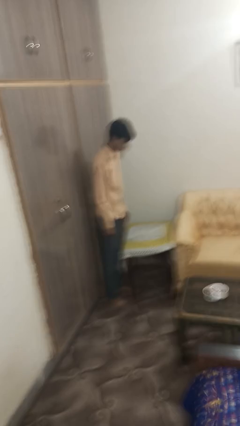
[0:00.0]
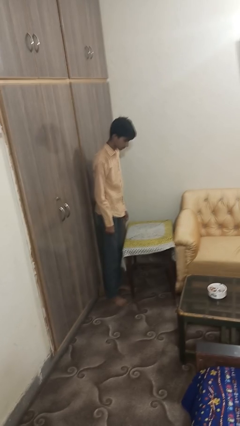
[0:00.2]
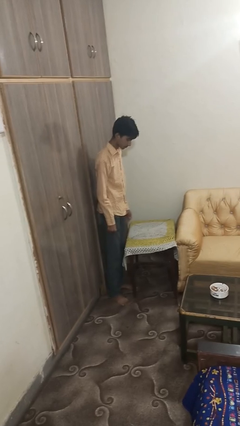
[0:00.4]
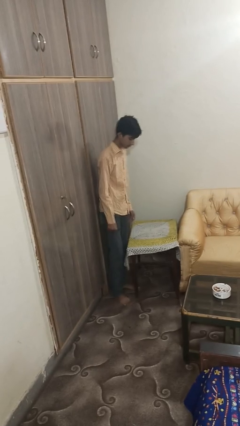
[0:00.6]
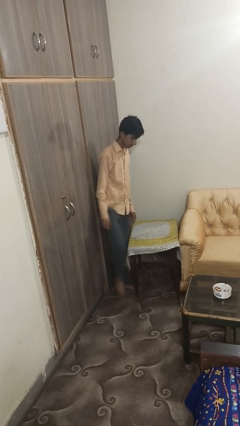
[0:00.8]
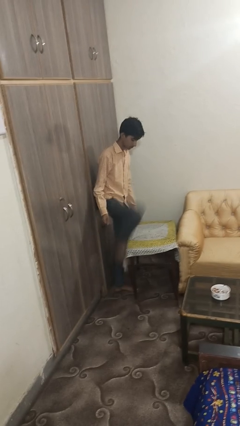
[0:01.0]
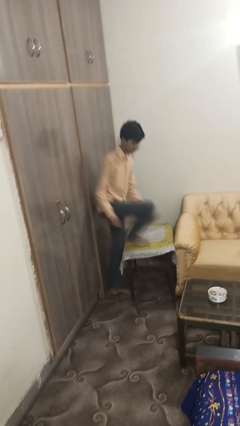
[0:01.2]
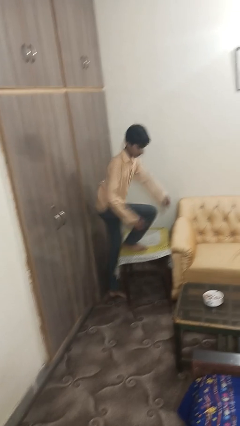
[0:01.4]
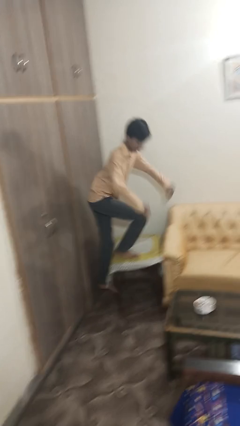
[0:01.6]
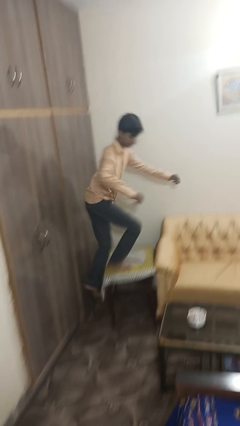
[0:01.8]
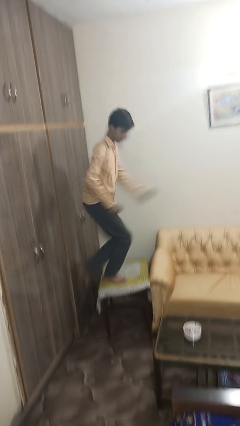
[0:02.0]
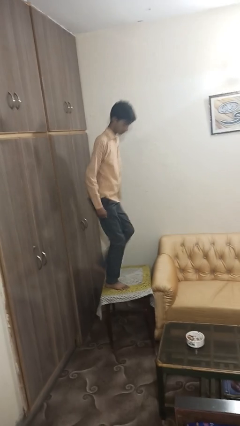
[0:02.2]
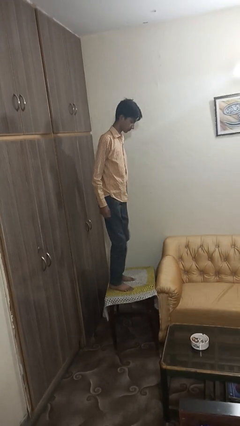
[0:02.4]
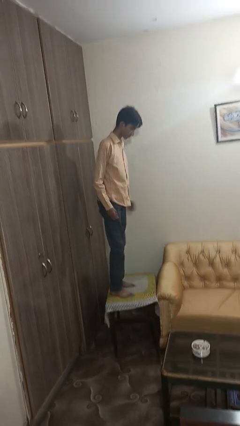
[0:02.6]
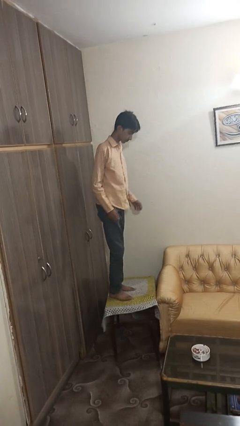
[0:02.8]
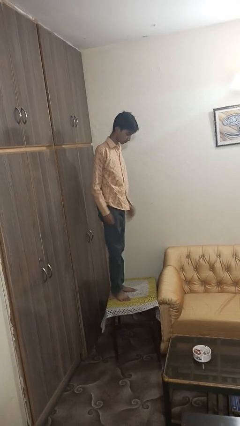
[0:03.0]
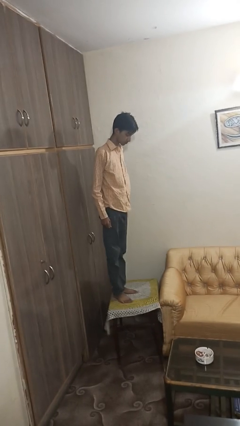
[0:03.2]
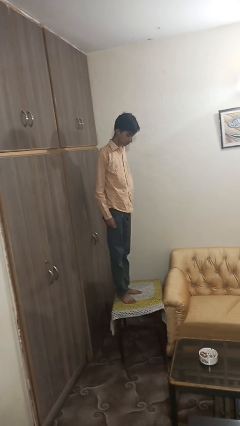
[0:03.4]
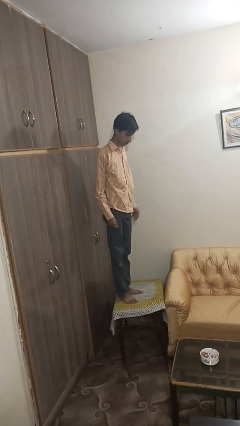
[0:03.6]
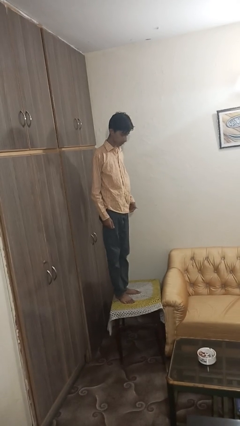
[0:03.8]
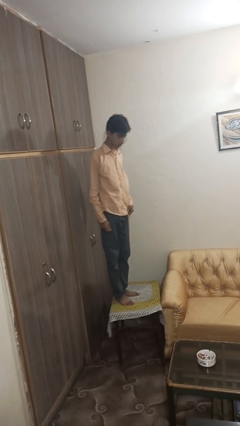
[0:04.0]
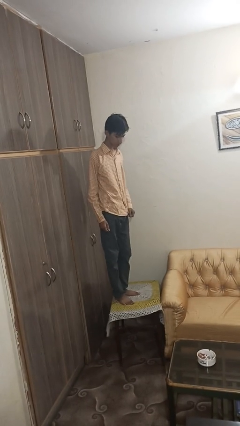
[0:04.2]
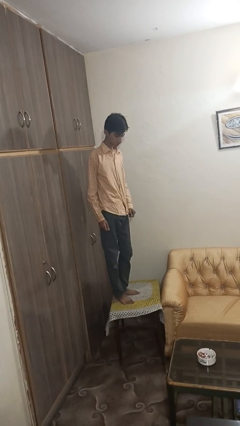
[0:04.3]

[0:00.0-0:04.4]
person climbs on table

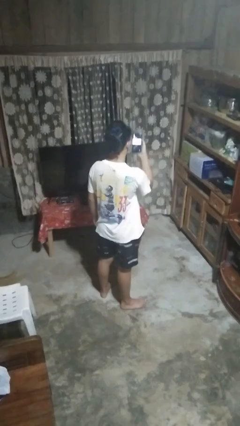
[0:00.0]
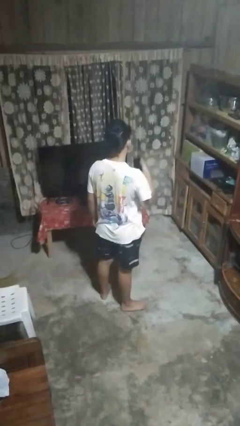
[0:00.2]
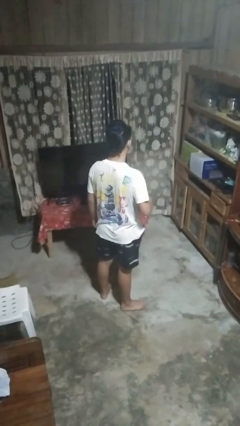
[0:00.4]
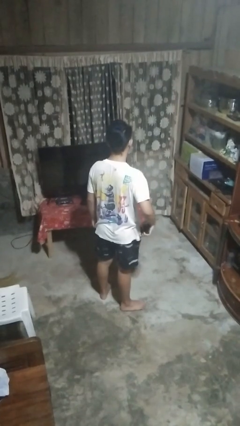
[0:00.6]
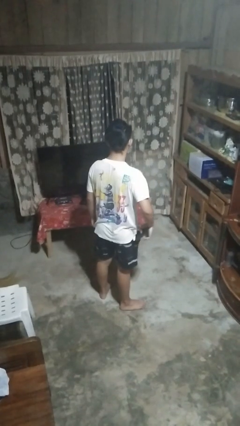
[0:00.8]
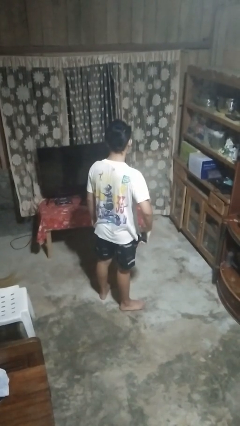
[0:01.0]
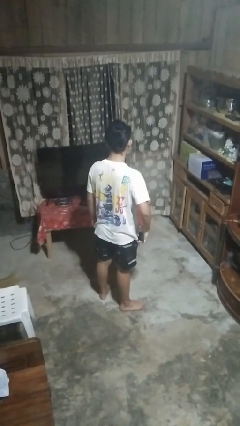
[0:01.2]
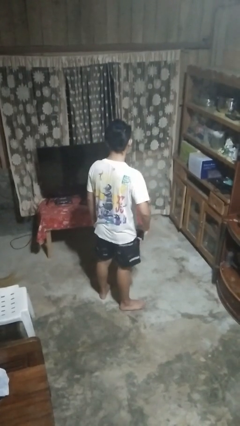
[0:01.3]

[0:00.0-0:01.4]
person puts phone into pocket

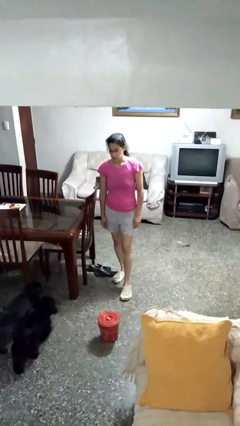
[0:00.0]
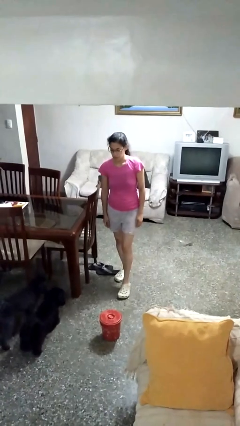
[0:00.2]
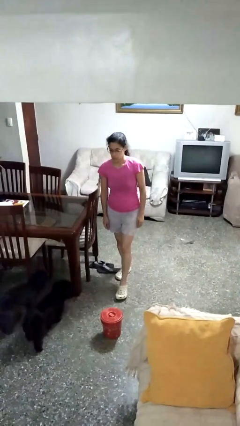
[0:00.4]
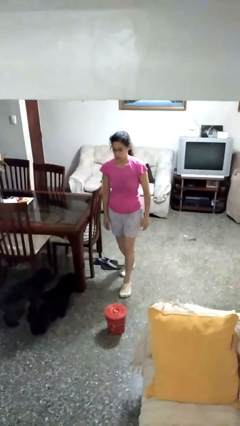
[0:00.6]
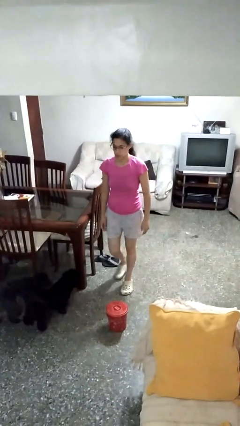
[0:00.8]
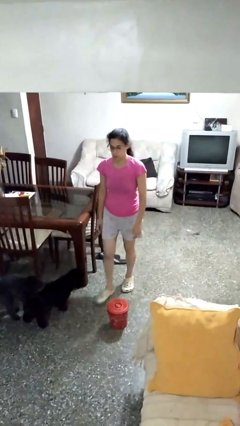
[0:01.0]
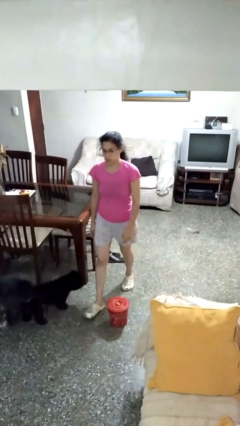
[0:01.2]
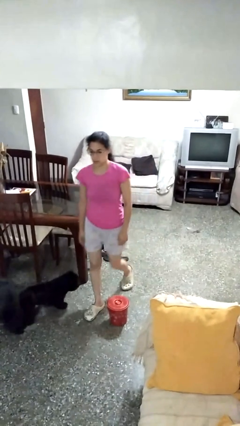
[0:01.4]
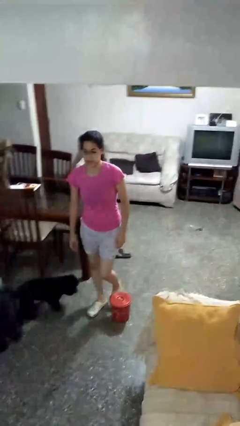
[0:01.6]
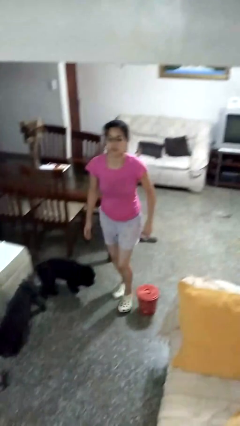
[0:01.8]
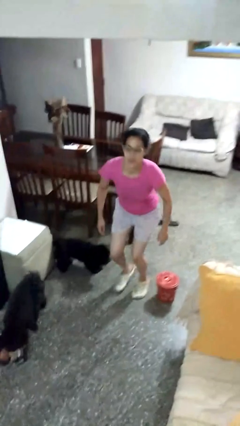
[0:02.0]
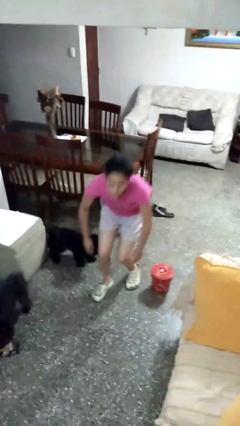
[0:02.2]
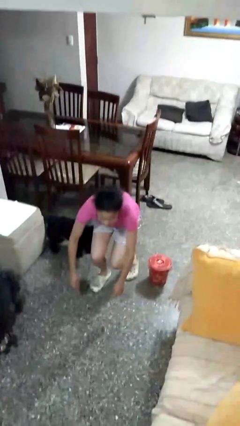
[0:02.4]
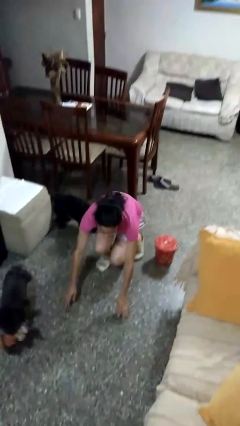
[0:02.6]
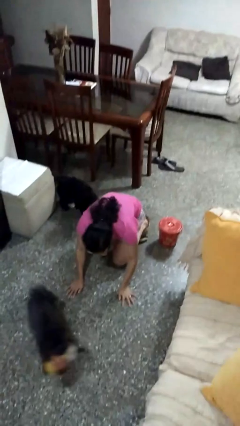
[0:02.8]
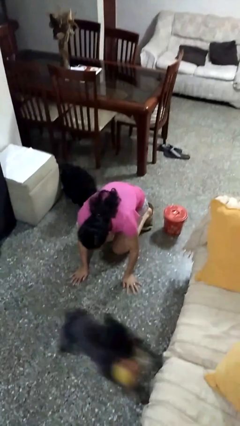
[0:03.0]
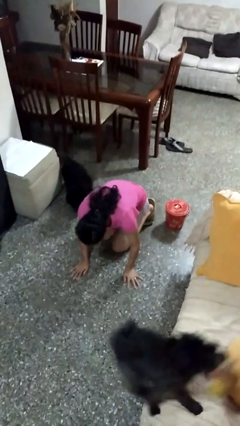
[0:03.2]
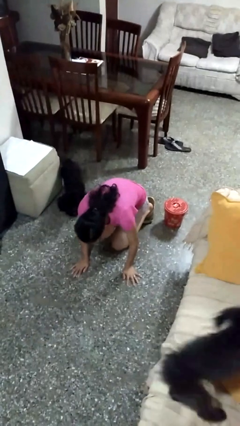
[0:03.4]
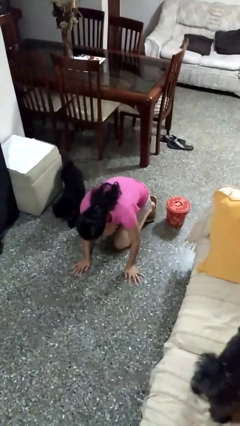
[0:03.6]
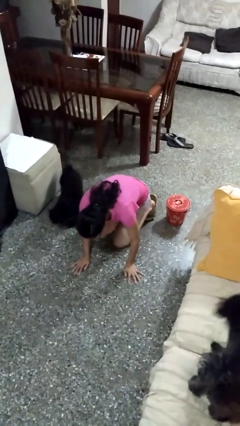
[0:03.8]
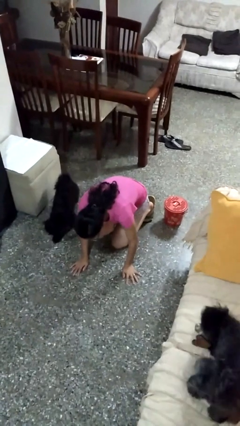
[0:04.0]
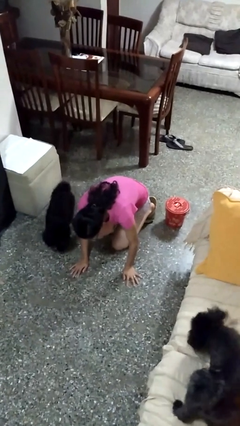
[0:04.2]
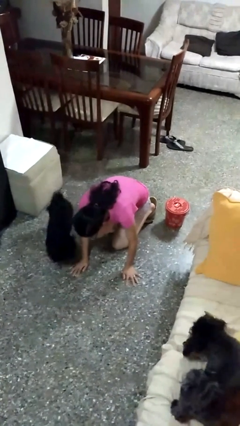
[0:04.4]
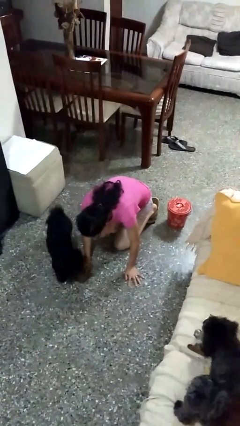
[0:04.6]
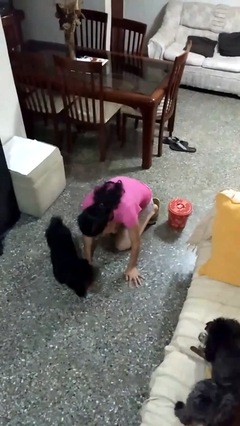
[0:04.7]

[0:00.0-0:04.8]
person trips on object on floor

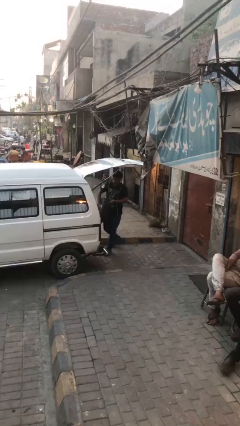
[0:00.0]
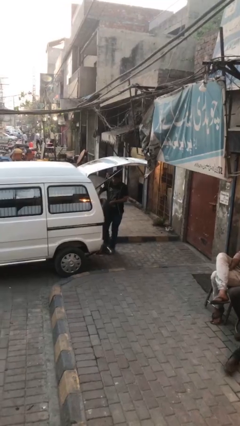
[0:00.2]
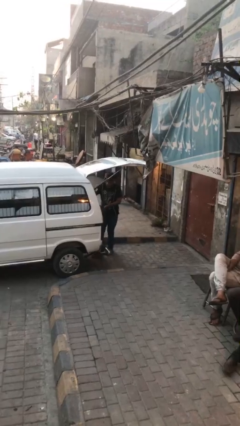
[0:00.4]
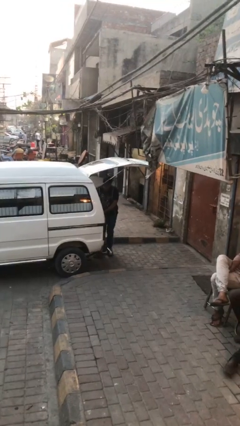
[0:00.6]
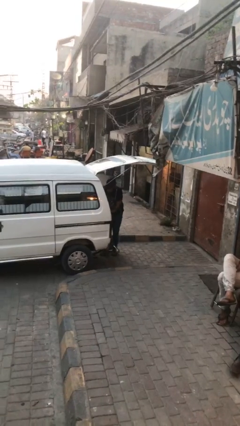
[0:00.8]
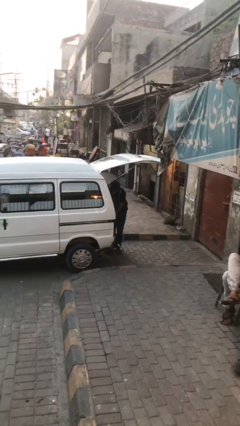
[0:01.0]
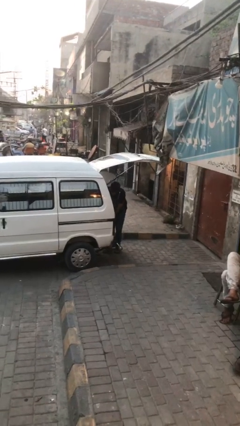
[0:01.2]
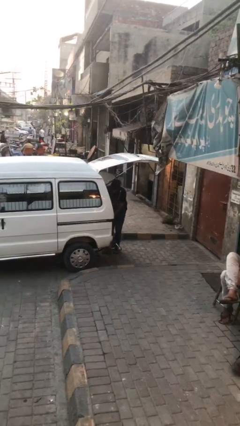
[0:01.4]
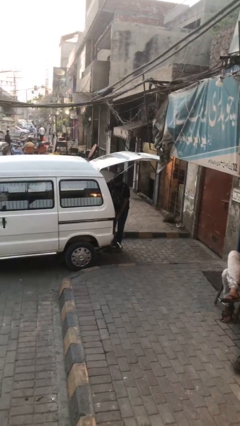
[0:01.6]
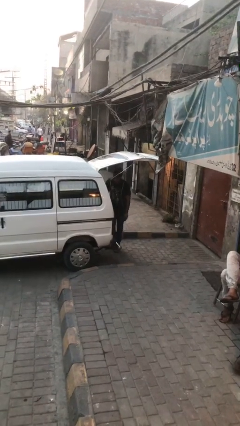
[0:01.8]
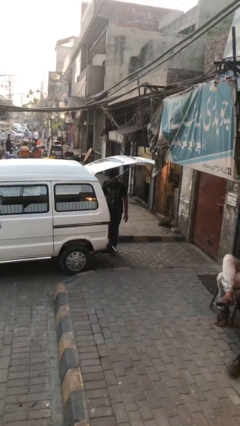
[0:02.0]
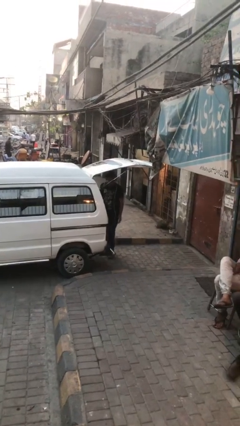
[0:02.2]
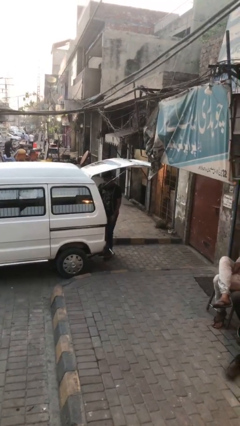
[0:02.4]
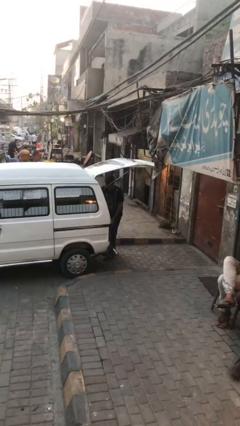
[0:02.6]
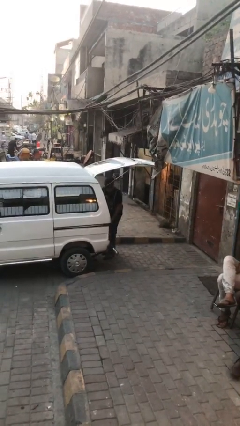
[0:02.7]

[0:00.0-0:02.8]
person loads car

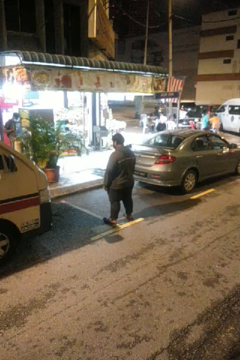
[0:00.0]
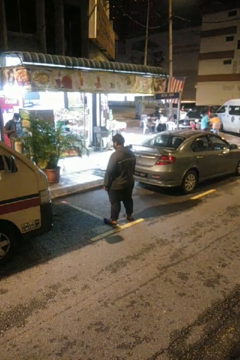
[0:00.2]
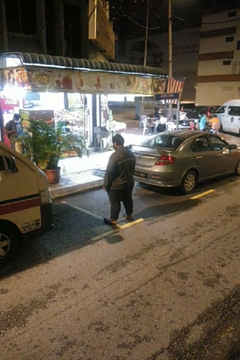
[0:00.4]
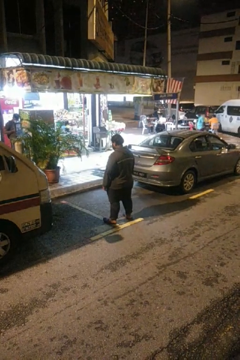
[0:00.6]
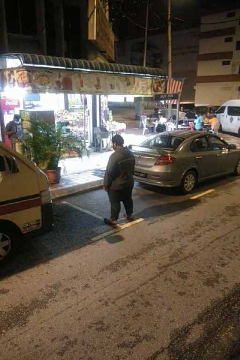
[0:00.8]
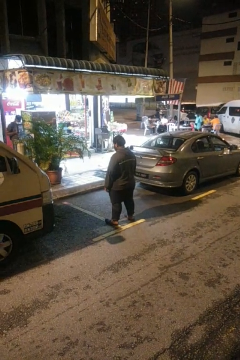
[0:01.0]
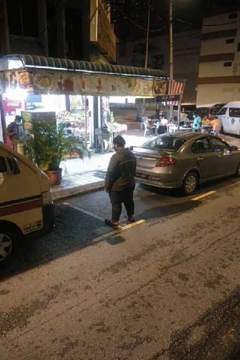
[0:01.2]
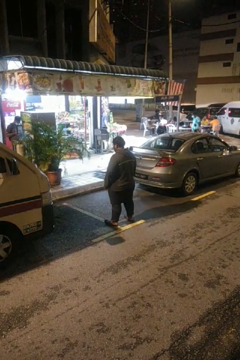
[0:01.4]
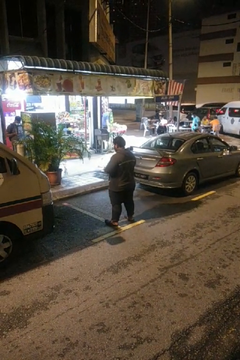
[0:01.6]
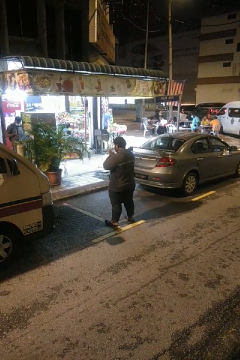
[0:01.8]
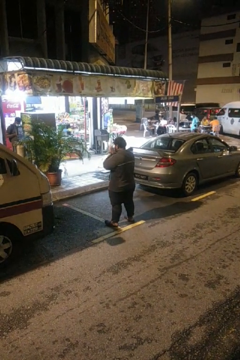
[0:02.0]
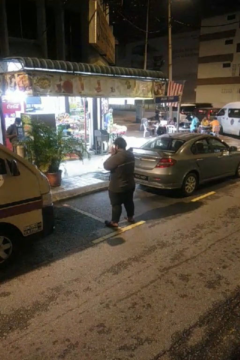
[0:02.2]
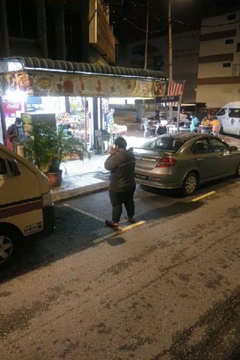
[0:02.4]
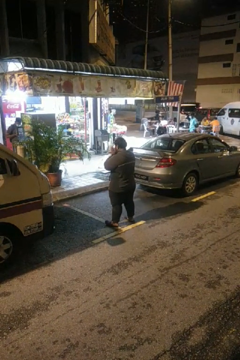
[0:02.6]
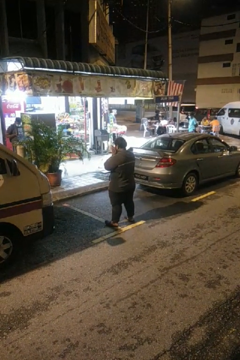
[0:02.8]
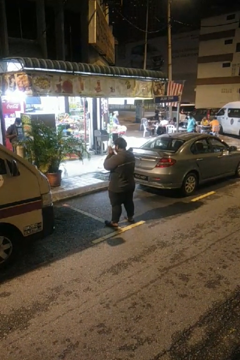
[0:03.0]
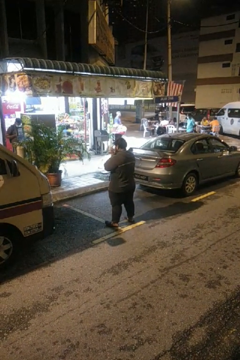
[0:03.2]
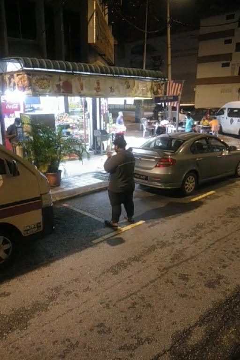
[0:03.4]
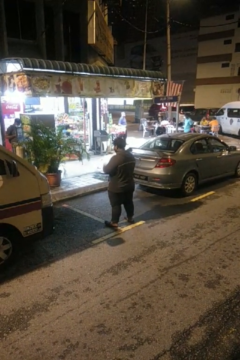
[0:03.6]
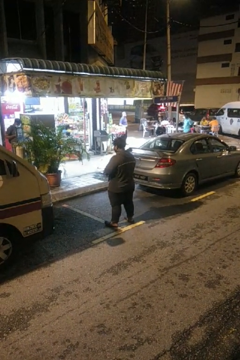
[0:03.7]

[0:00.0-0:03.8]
person blows into hands

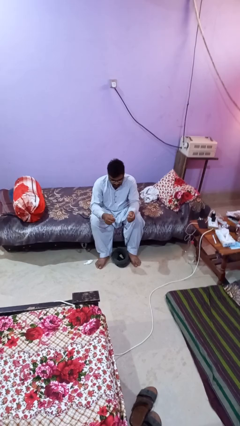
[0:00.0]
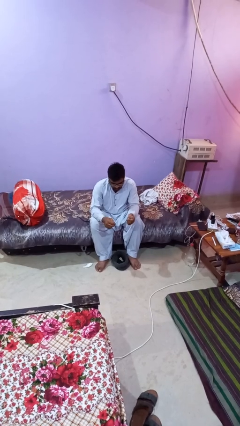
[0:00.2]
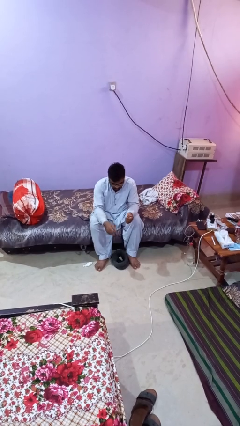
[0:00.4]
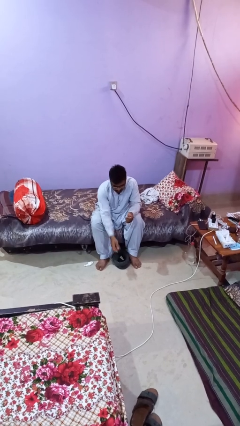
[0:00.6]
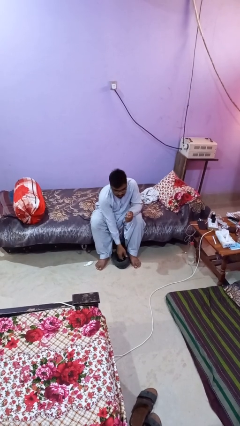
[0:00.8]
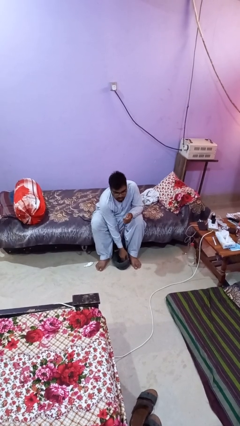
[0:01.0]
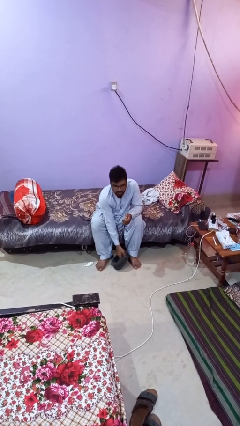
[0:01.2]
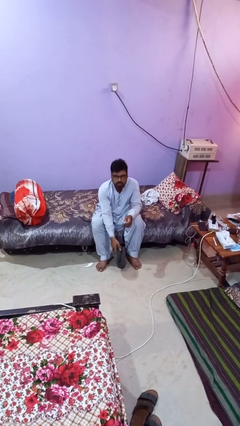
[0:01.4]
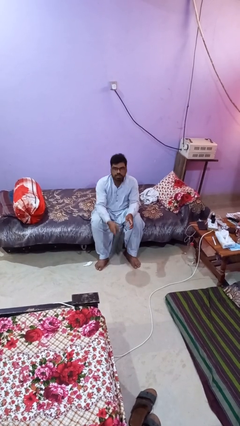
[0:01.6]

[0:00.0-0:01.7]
person picks up object from floor
